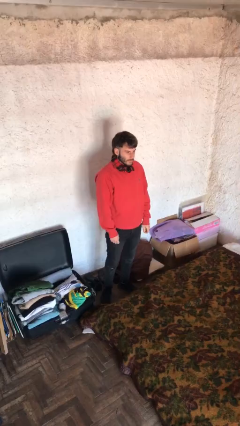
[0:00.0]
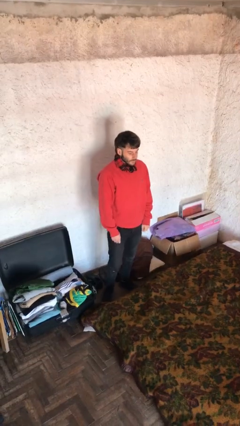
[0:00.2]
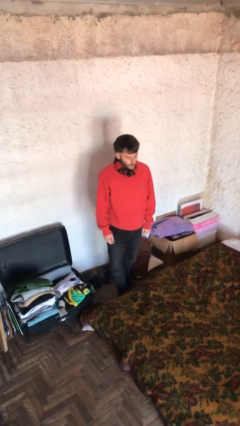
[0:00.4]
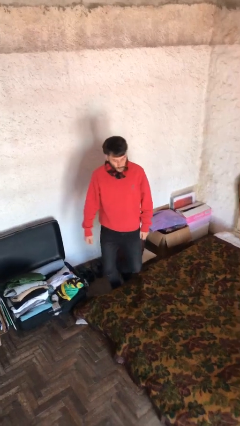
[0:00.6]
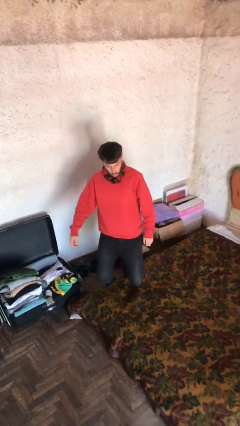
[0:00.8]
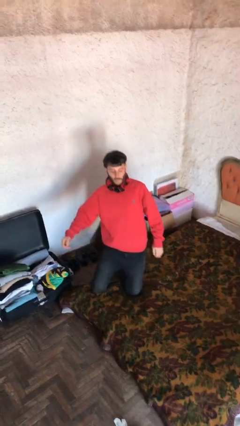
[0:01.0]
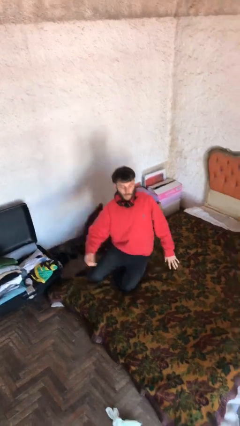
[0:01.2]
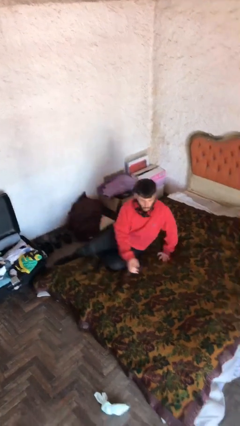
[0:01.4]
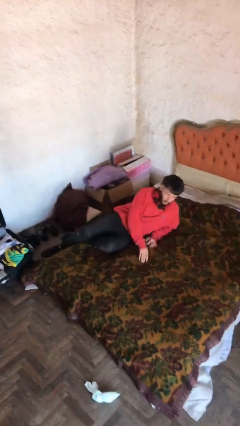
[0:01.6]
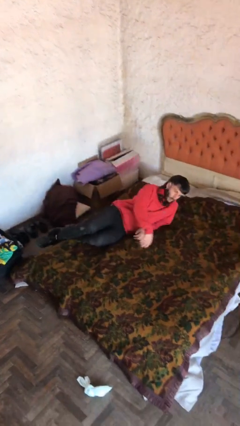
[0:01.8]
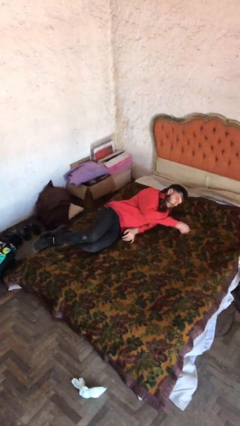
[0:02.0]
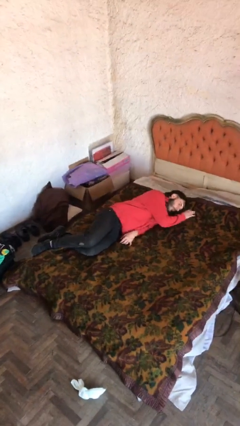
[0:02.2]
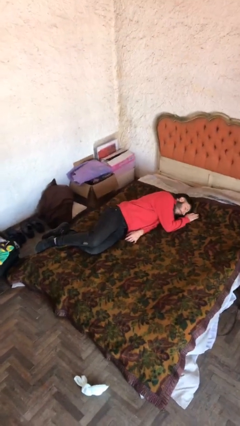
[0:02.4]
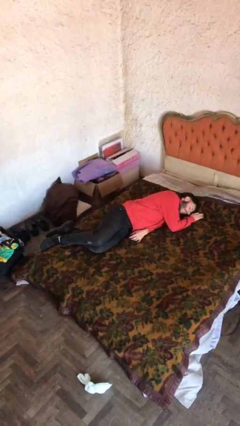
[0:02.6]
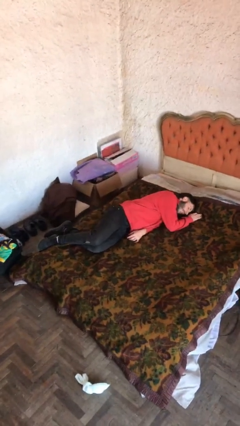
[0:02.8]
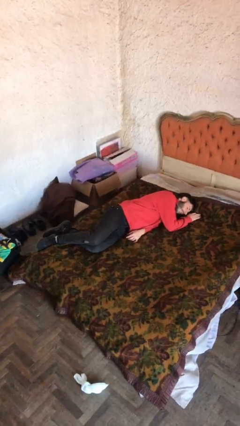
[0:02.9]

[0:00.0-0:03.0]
person lies down on bed

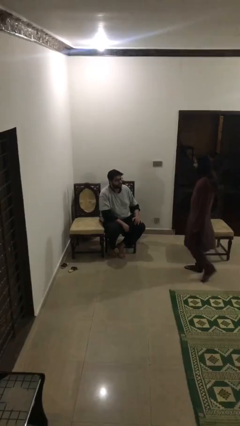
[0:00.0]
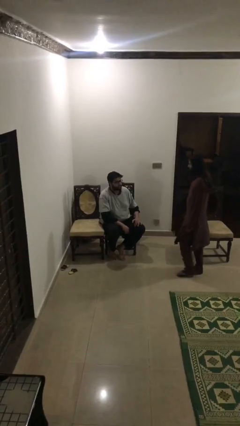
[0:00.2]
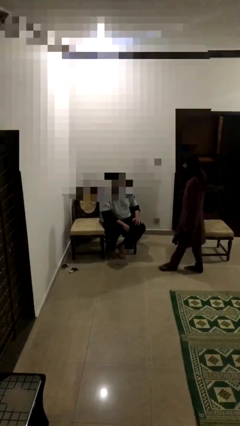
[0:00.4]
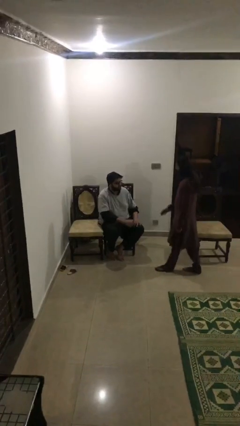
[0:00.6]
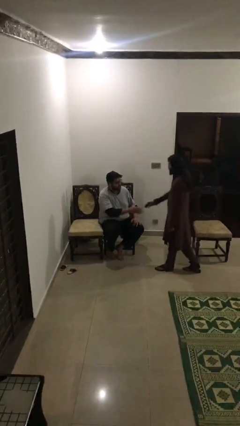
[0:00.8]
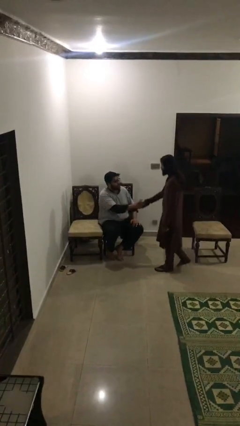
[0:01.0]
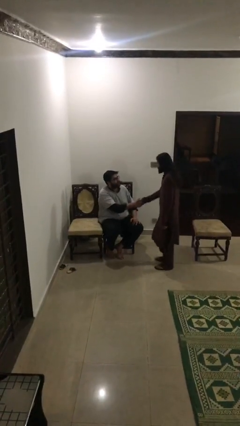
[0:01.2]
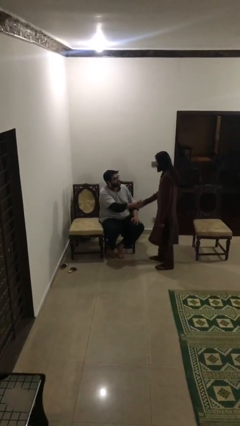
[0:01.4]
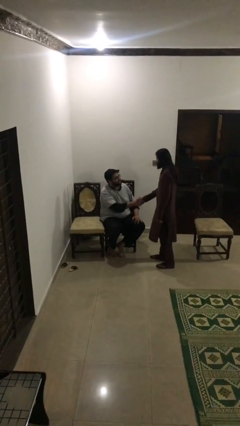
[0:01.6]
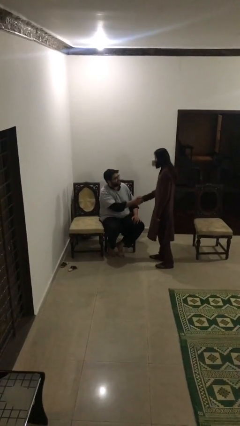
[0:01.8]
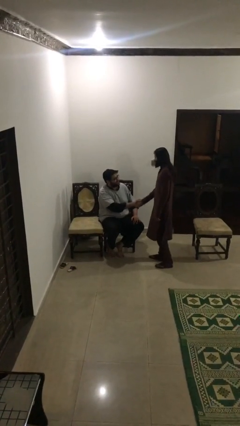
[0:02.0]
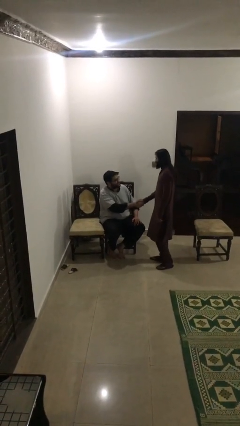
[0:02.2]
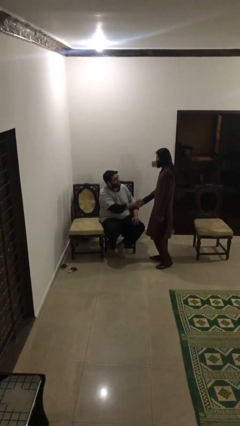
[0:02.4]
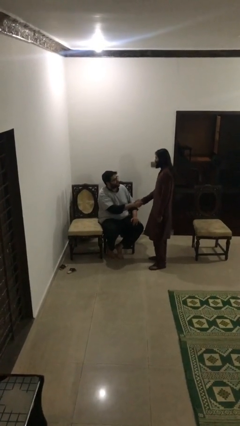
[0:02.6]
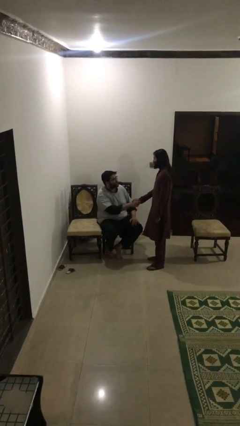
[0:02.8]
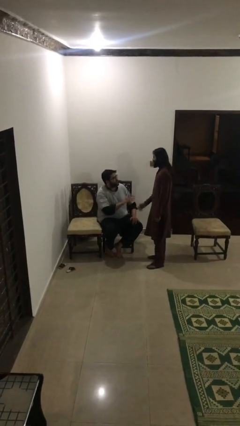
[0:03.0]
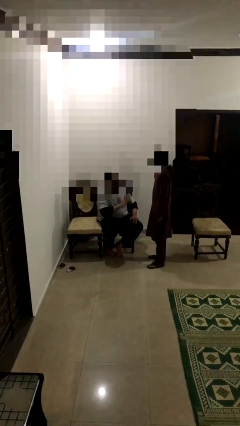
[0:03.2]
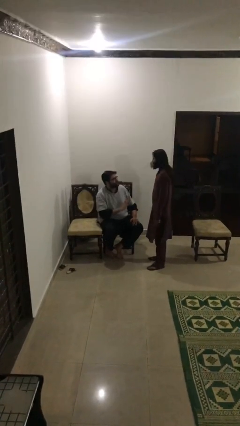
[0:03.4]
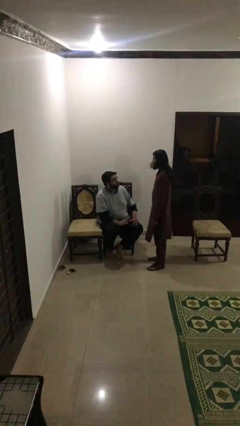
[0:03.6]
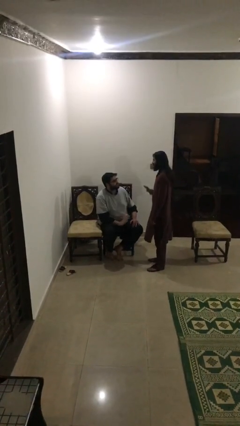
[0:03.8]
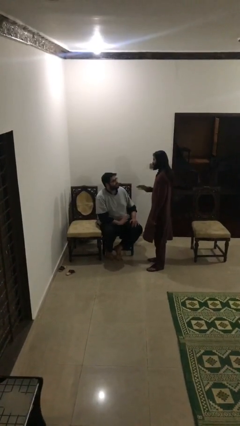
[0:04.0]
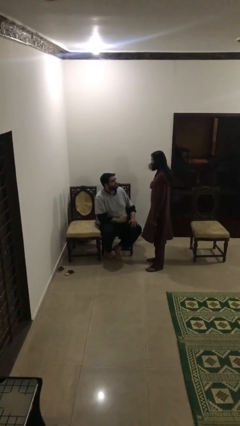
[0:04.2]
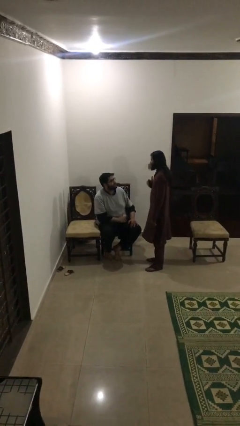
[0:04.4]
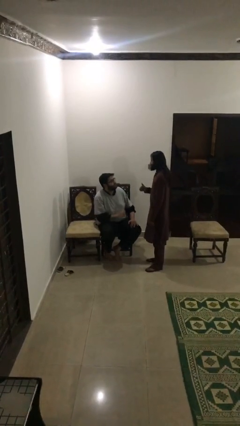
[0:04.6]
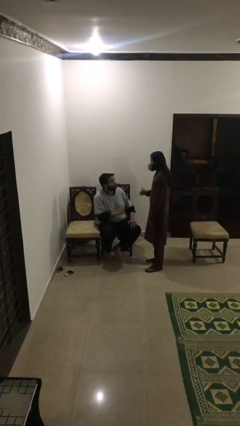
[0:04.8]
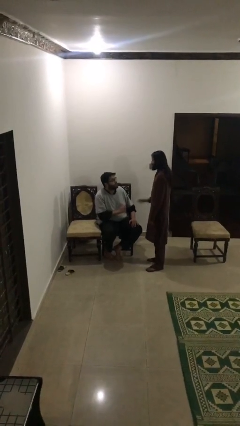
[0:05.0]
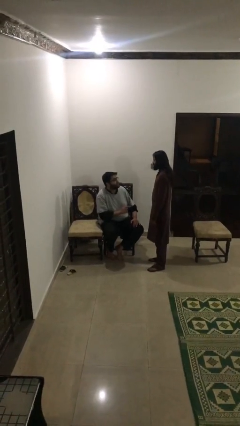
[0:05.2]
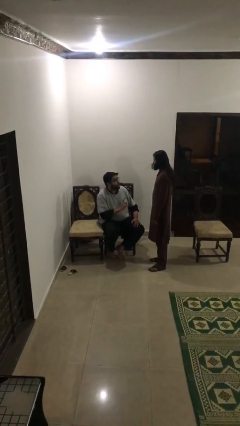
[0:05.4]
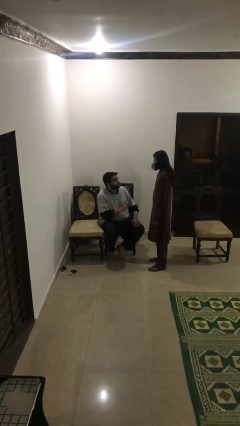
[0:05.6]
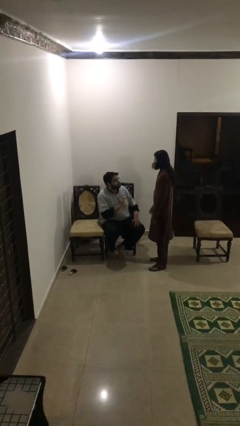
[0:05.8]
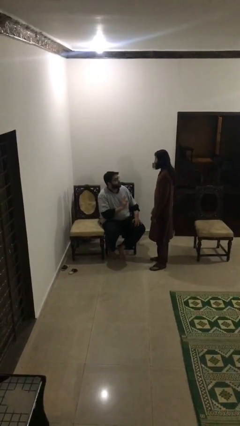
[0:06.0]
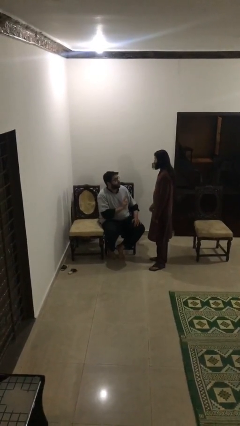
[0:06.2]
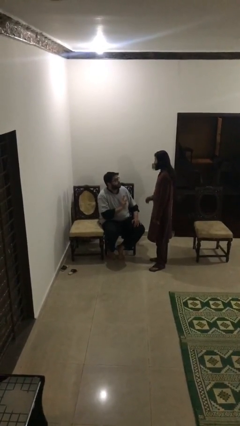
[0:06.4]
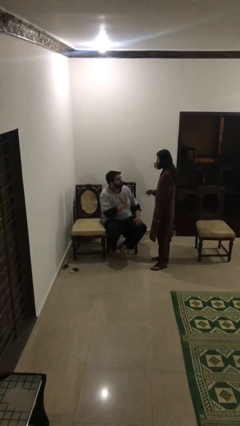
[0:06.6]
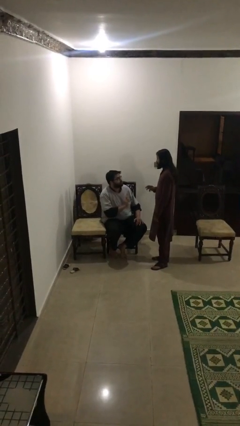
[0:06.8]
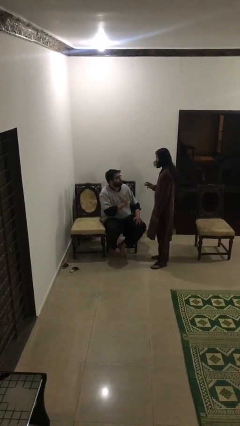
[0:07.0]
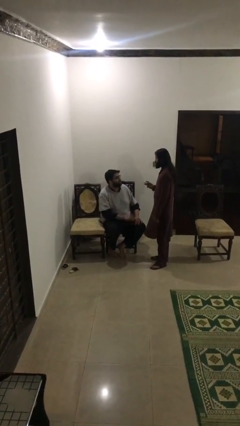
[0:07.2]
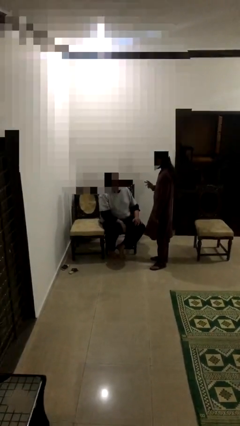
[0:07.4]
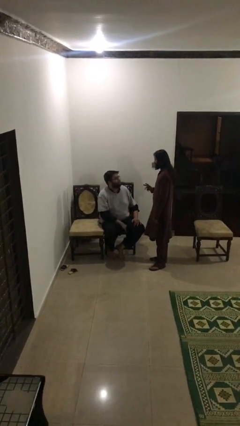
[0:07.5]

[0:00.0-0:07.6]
person shakes hand

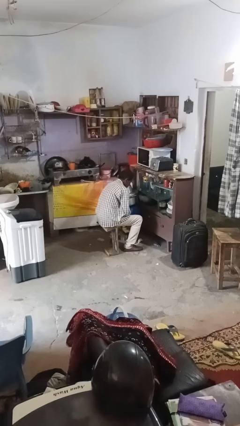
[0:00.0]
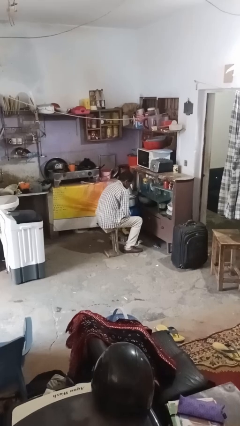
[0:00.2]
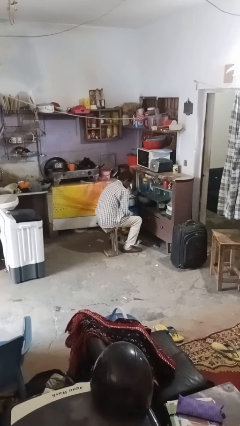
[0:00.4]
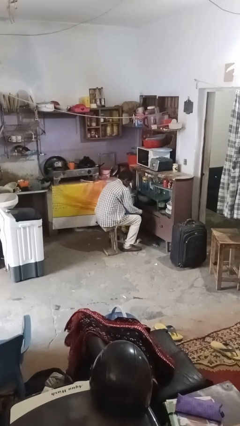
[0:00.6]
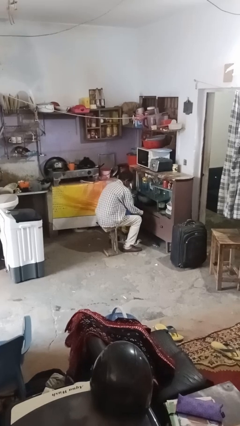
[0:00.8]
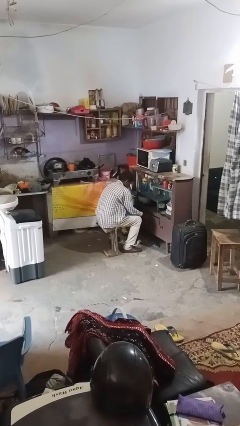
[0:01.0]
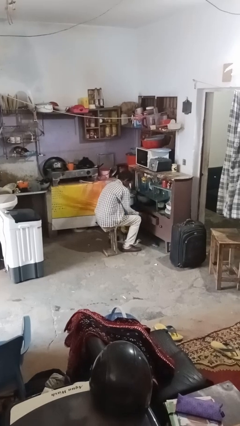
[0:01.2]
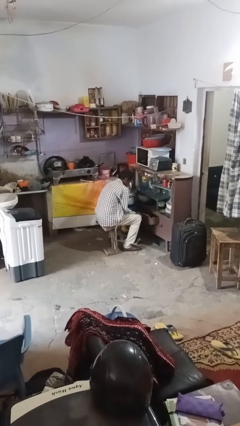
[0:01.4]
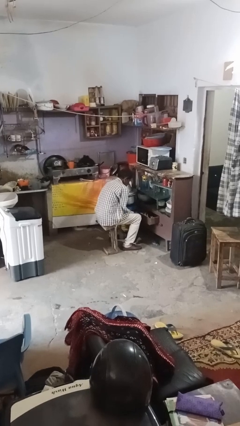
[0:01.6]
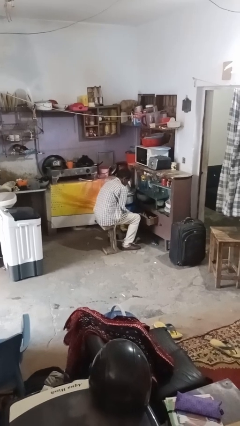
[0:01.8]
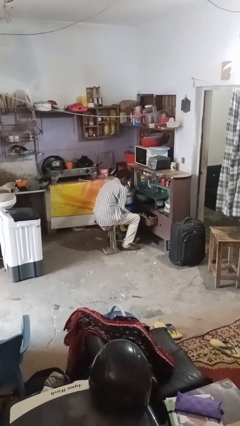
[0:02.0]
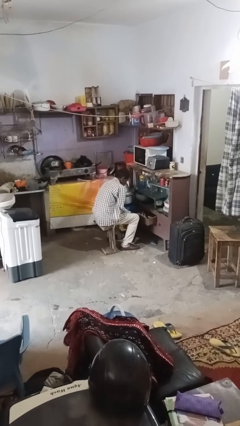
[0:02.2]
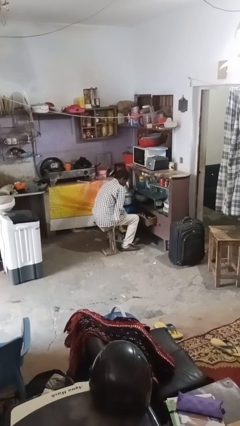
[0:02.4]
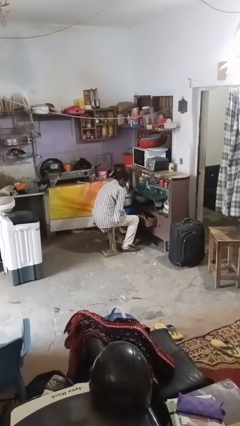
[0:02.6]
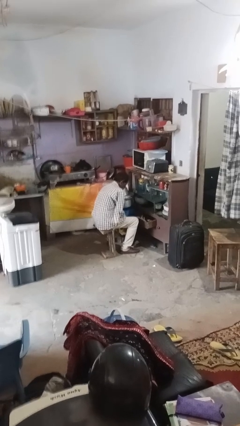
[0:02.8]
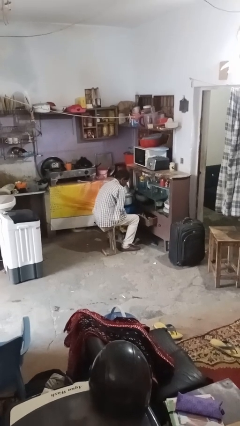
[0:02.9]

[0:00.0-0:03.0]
person opens kitchen drawer

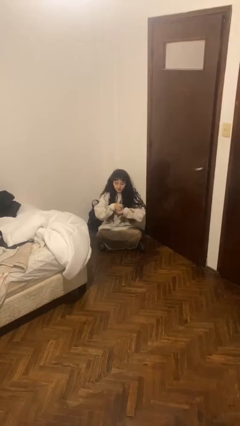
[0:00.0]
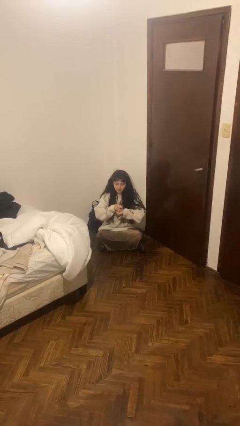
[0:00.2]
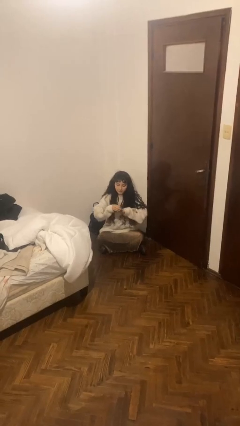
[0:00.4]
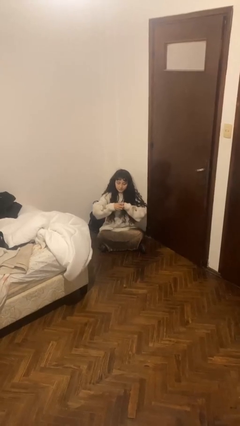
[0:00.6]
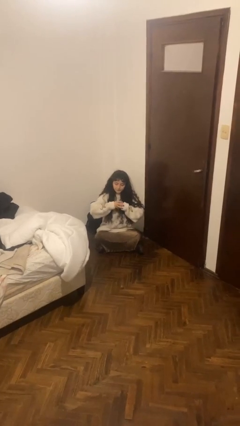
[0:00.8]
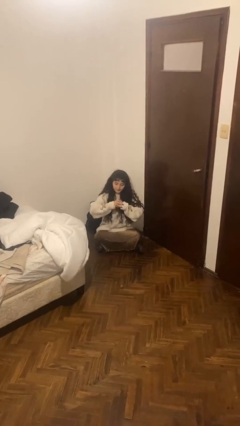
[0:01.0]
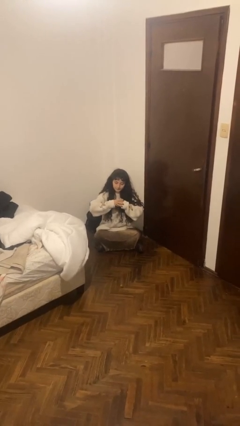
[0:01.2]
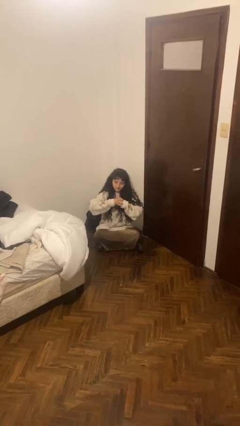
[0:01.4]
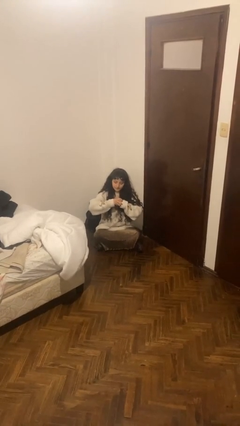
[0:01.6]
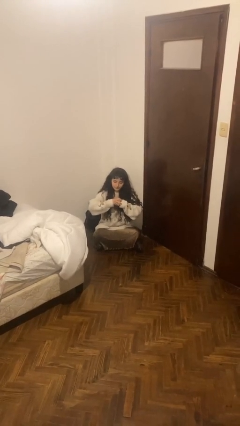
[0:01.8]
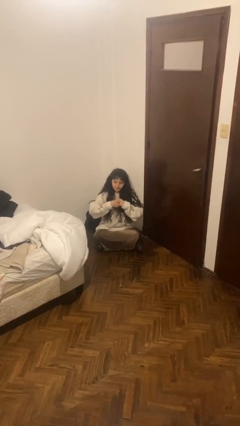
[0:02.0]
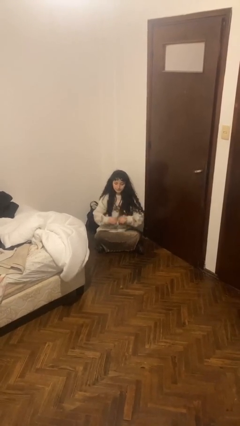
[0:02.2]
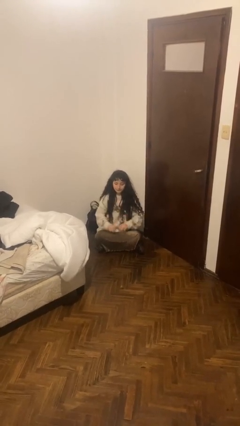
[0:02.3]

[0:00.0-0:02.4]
person cracks knuckles

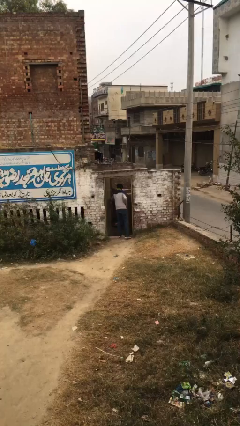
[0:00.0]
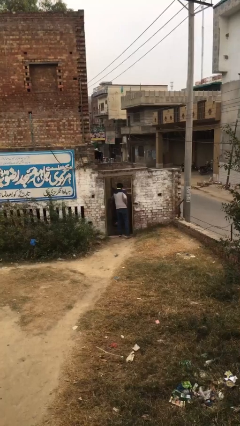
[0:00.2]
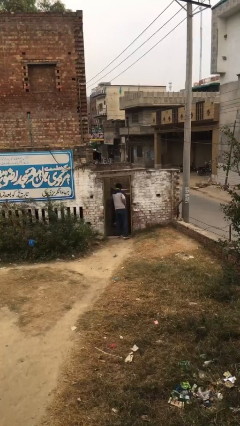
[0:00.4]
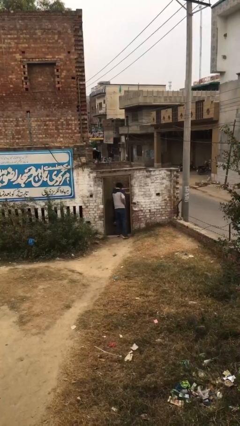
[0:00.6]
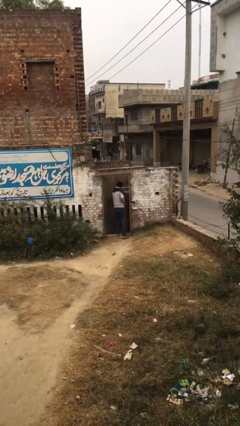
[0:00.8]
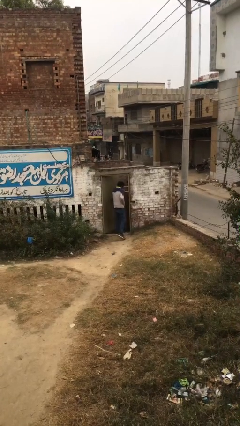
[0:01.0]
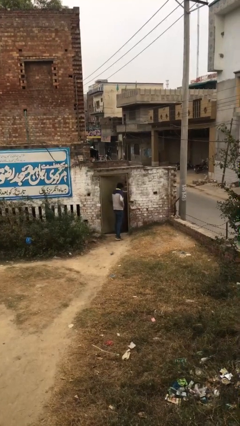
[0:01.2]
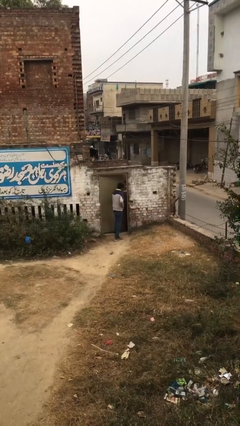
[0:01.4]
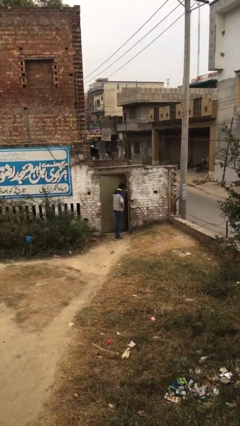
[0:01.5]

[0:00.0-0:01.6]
person opens facility door
